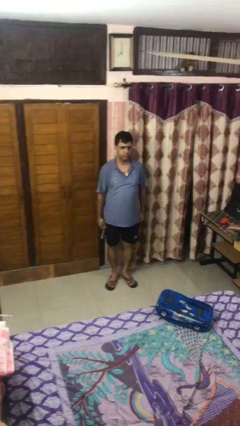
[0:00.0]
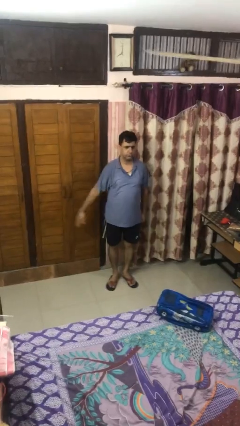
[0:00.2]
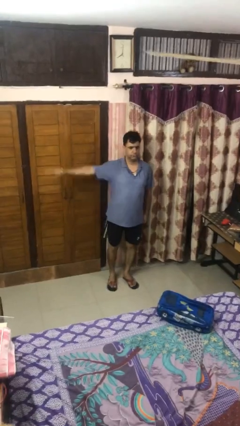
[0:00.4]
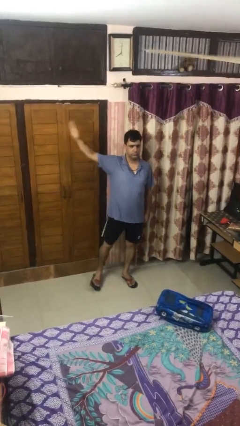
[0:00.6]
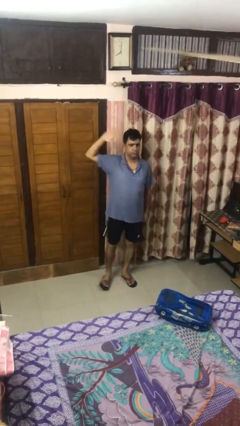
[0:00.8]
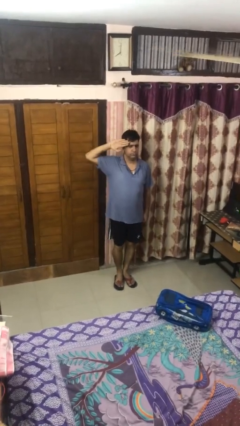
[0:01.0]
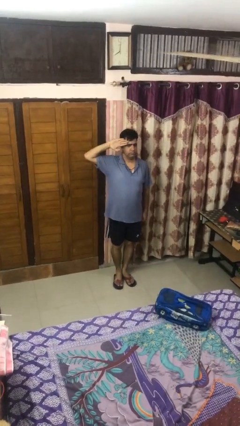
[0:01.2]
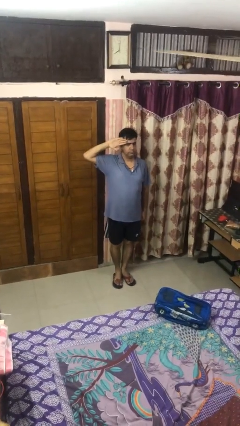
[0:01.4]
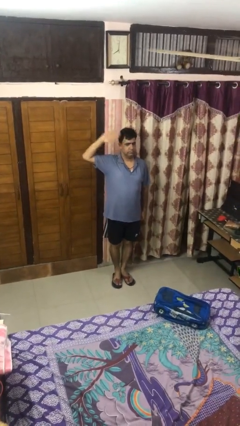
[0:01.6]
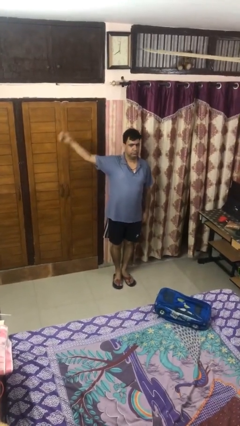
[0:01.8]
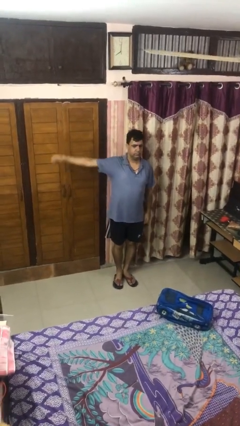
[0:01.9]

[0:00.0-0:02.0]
person salutes

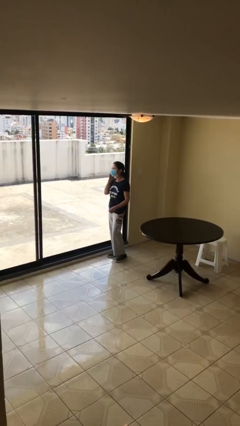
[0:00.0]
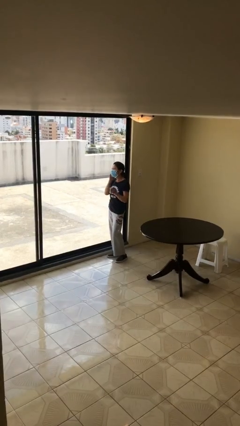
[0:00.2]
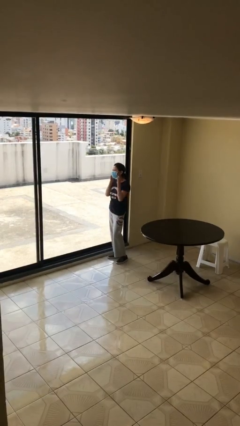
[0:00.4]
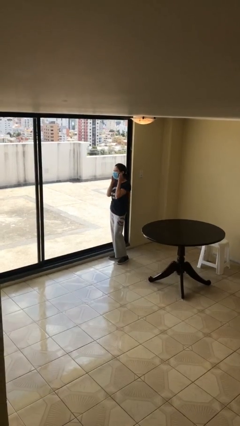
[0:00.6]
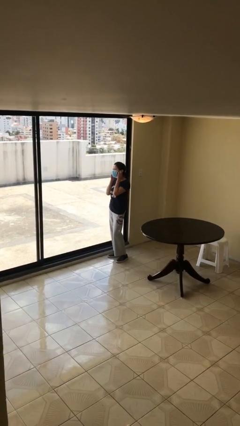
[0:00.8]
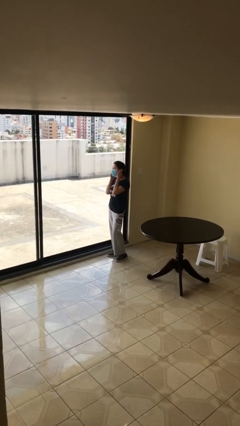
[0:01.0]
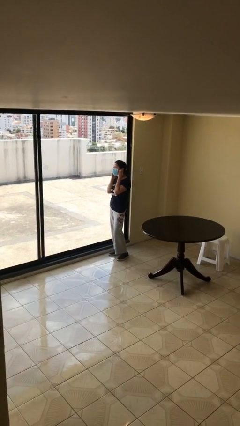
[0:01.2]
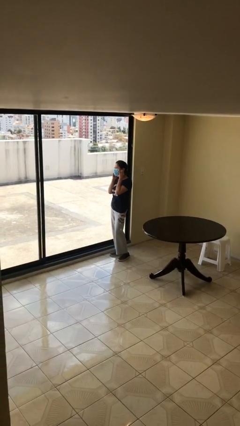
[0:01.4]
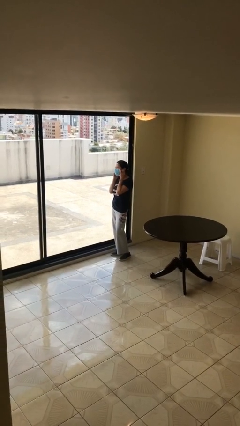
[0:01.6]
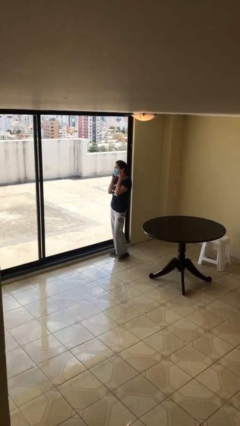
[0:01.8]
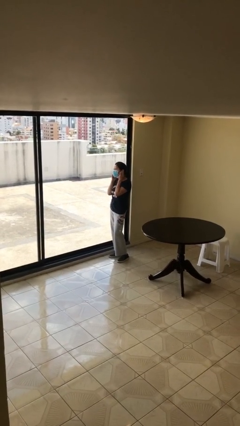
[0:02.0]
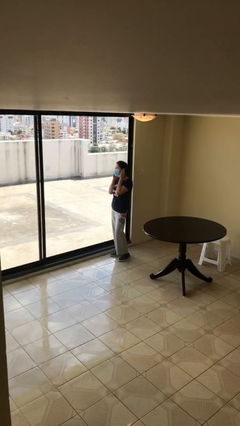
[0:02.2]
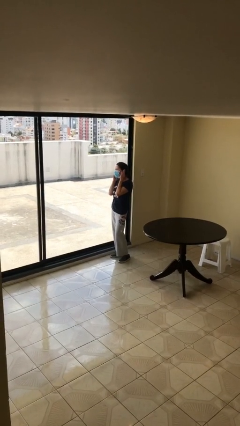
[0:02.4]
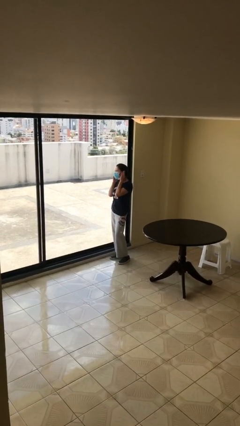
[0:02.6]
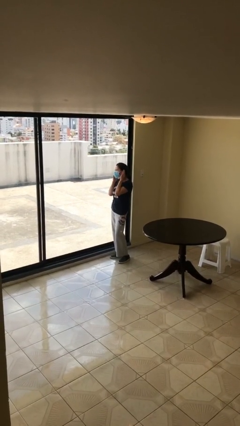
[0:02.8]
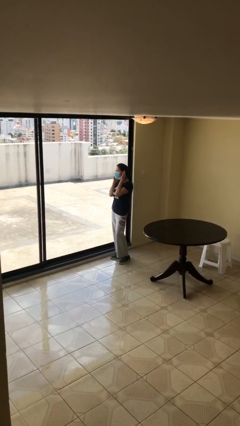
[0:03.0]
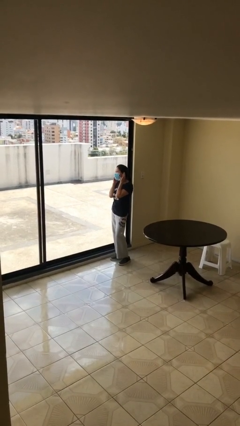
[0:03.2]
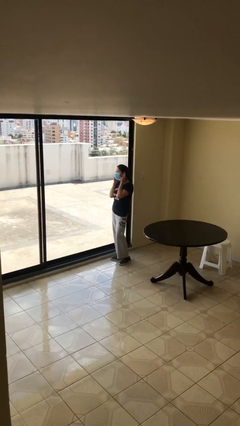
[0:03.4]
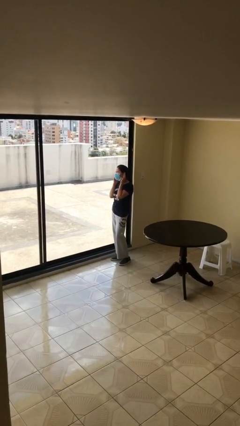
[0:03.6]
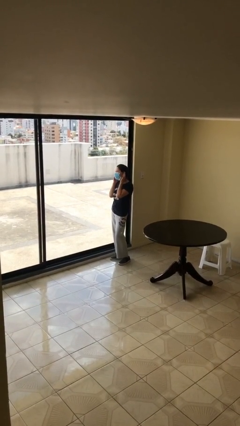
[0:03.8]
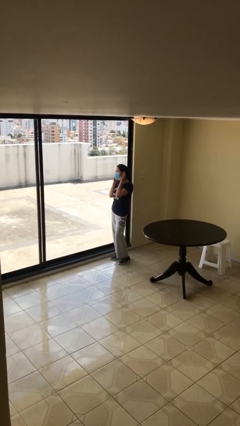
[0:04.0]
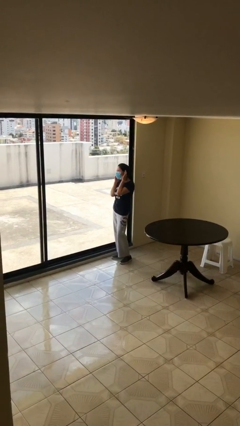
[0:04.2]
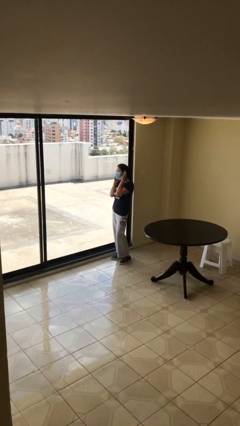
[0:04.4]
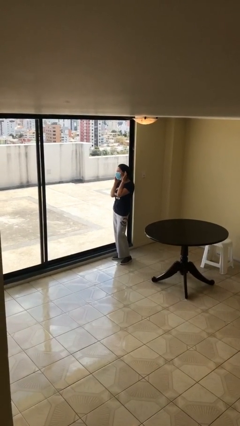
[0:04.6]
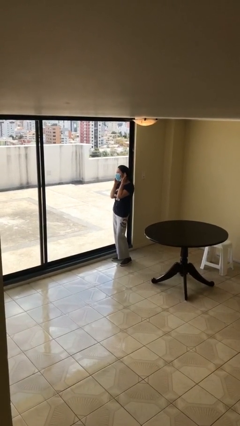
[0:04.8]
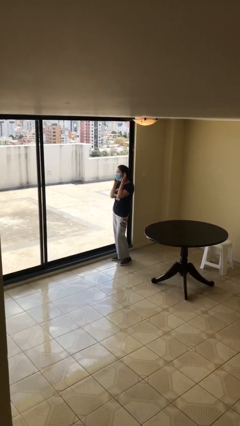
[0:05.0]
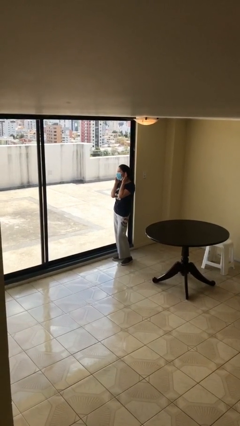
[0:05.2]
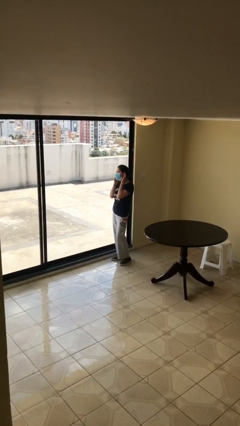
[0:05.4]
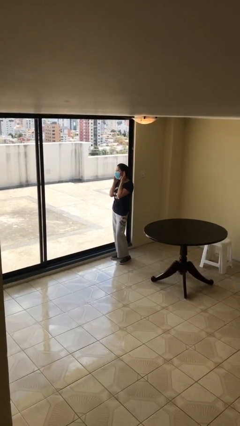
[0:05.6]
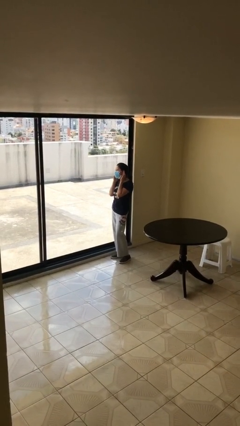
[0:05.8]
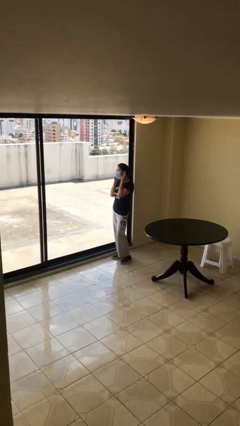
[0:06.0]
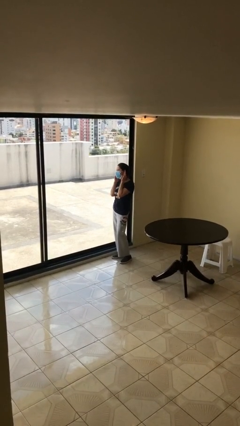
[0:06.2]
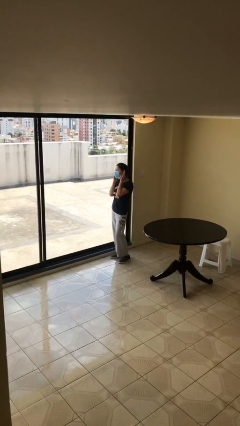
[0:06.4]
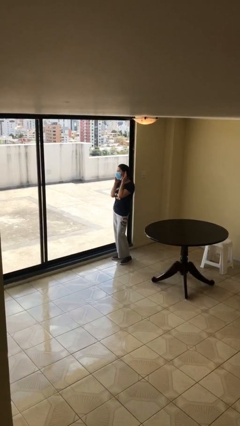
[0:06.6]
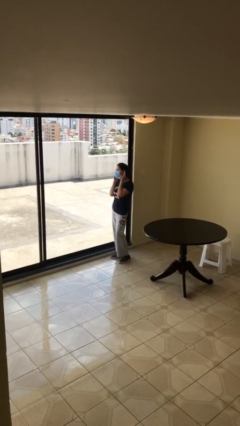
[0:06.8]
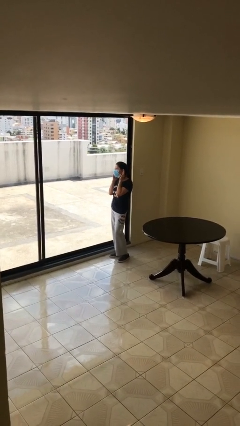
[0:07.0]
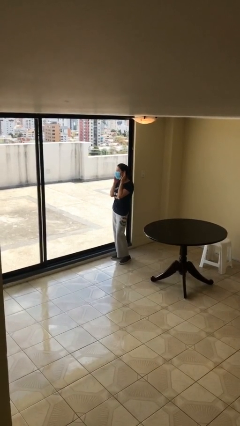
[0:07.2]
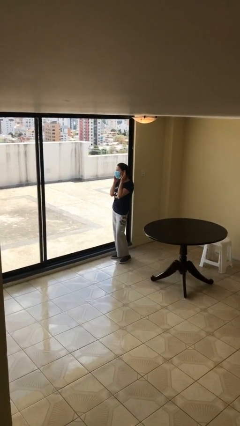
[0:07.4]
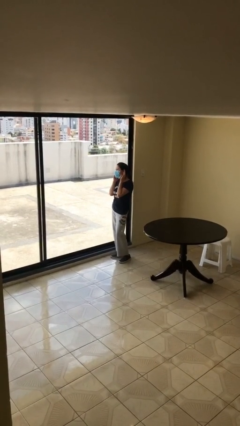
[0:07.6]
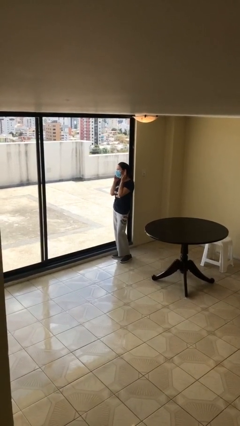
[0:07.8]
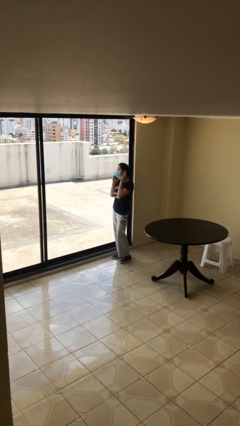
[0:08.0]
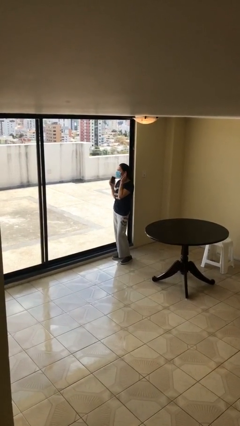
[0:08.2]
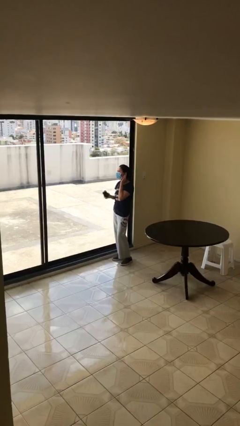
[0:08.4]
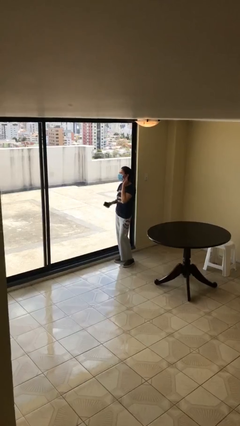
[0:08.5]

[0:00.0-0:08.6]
person talks on phone

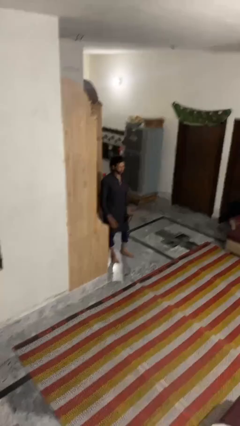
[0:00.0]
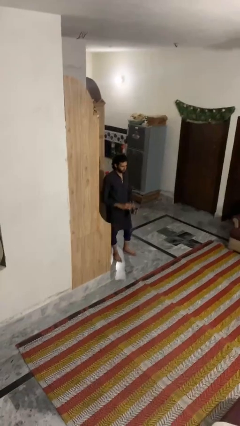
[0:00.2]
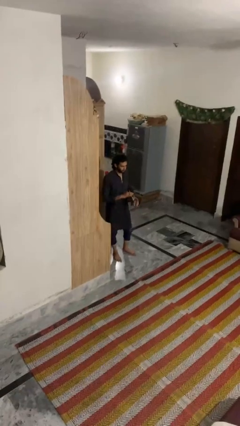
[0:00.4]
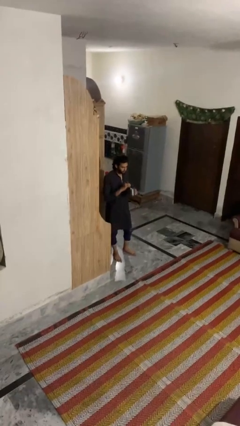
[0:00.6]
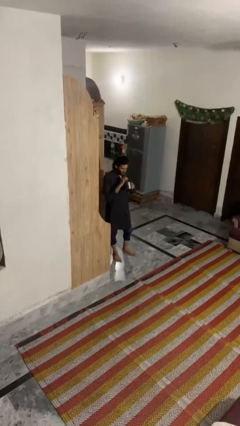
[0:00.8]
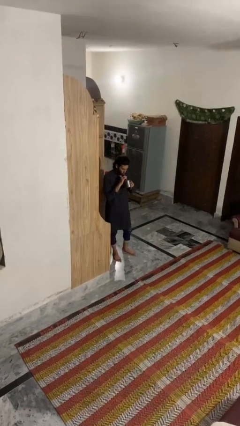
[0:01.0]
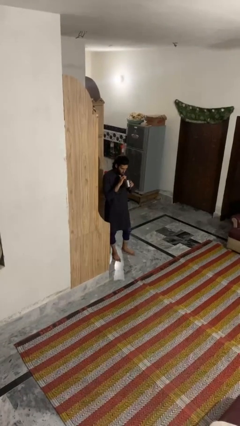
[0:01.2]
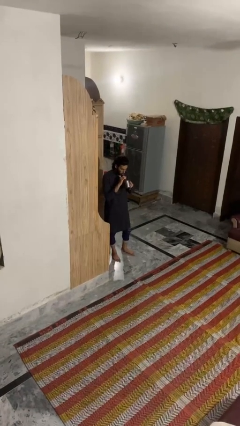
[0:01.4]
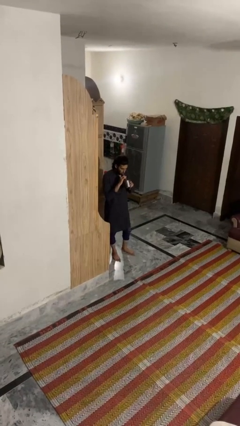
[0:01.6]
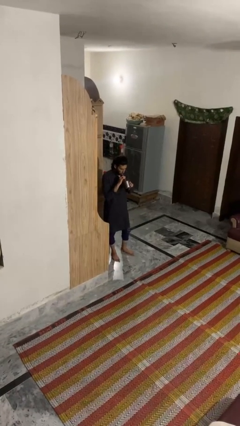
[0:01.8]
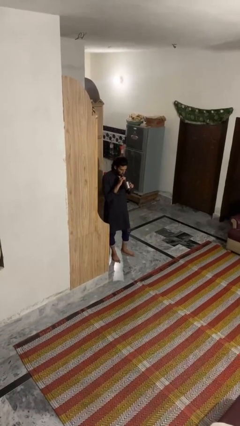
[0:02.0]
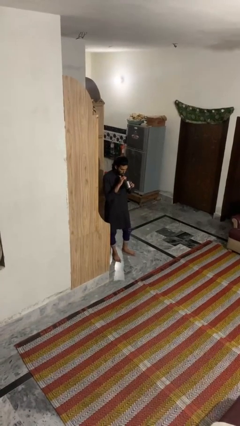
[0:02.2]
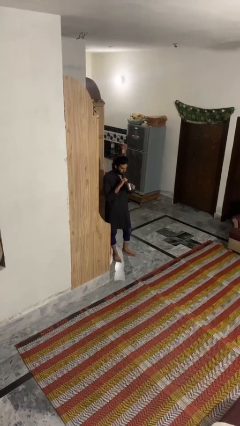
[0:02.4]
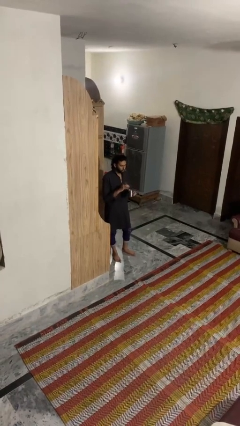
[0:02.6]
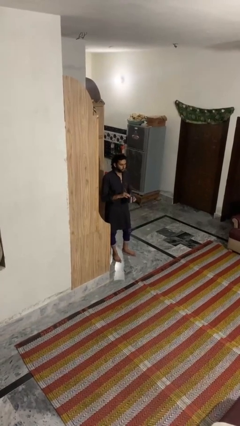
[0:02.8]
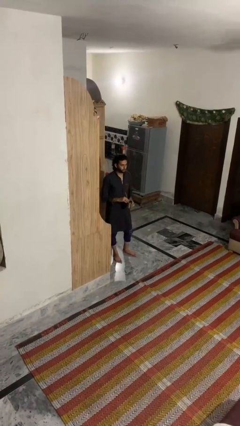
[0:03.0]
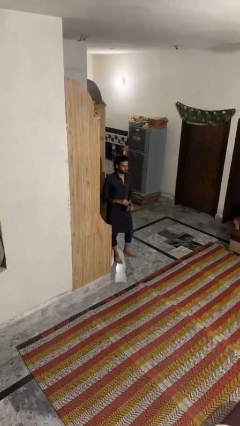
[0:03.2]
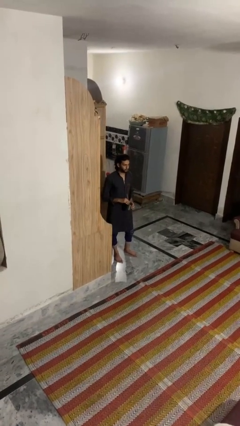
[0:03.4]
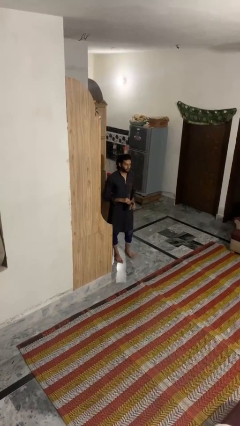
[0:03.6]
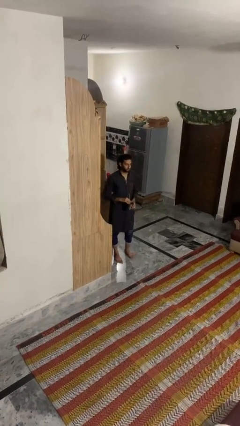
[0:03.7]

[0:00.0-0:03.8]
person drinks from straw

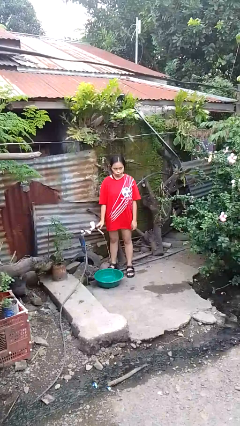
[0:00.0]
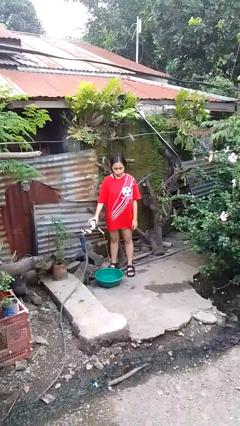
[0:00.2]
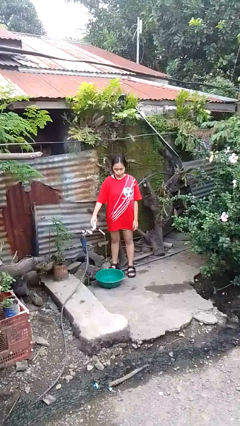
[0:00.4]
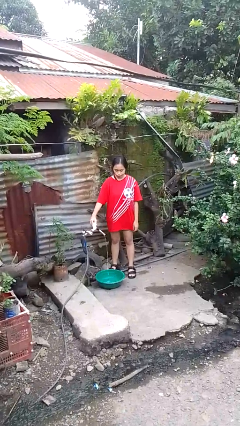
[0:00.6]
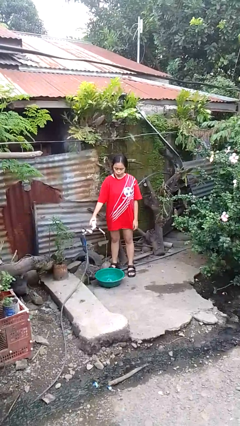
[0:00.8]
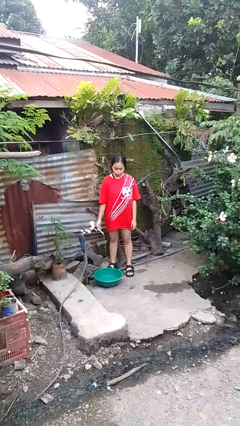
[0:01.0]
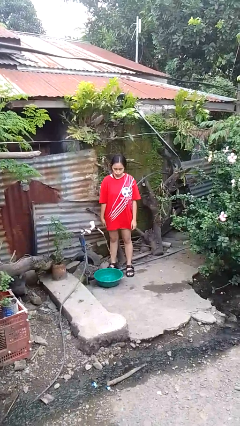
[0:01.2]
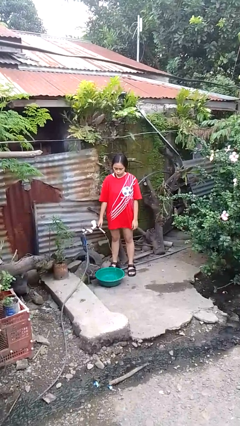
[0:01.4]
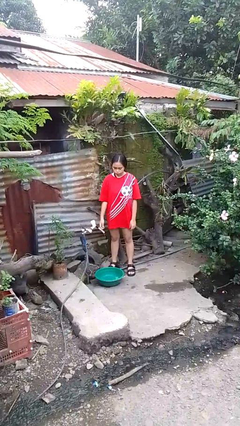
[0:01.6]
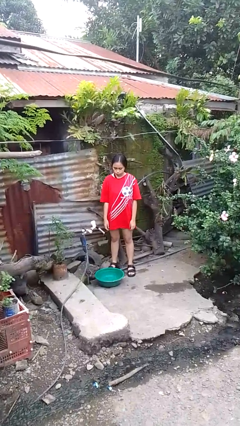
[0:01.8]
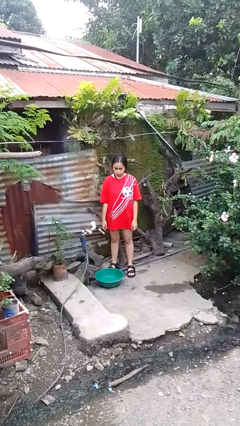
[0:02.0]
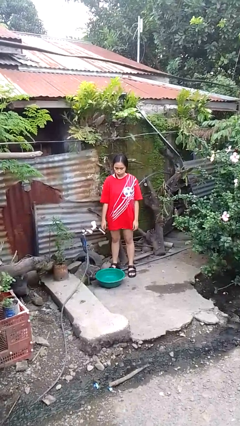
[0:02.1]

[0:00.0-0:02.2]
person turns off faucet

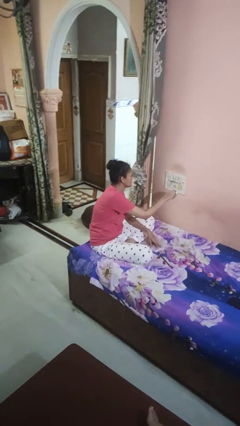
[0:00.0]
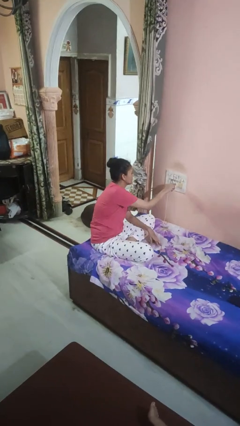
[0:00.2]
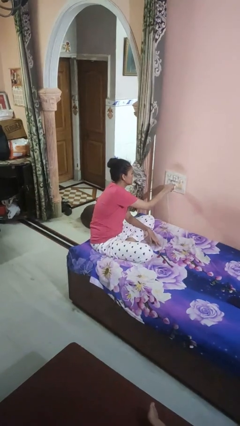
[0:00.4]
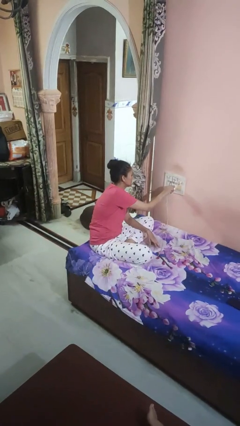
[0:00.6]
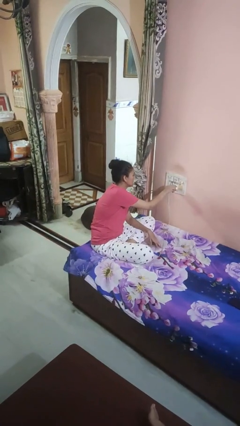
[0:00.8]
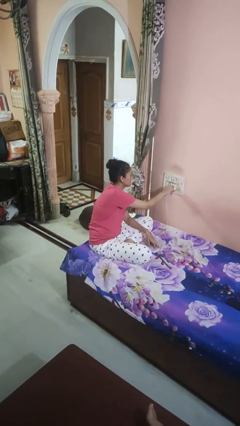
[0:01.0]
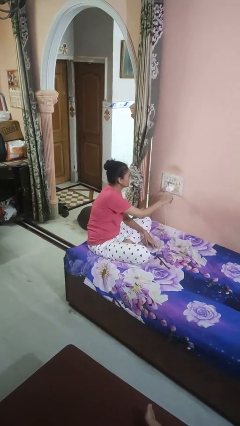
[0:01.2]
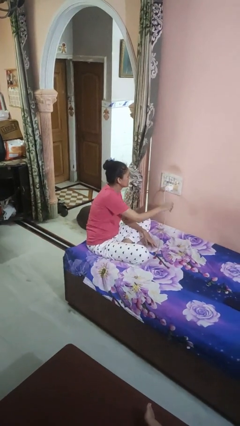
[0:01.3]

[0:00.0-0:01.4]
person plugs into electrical socket
